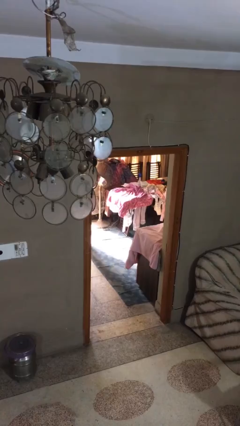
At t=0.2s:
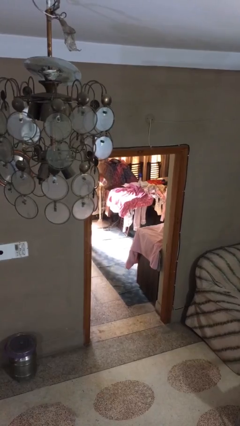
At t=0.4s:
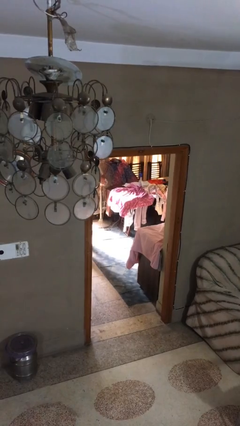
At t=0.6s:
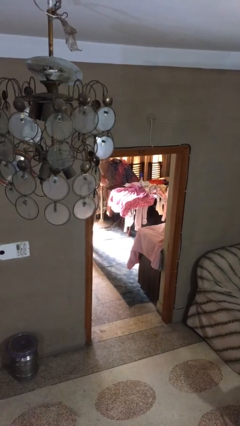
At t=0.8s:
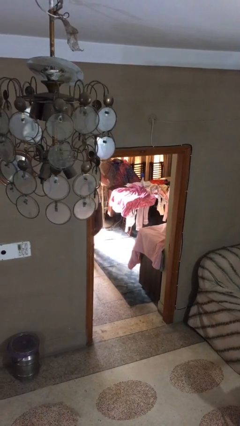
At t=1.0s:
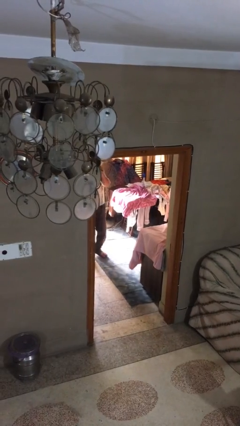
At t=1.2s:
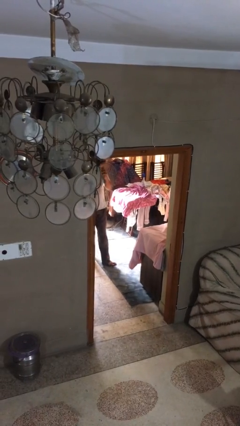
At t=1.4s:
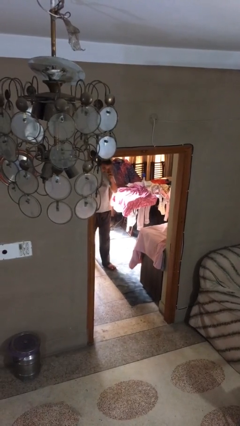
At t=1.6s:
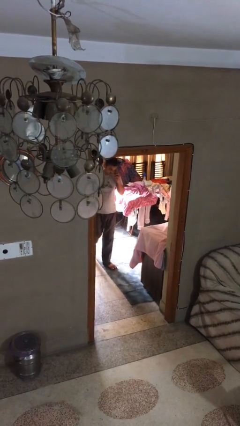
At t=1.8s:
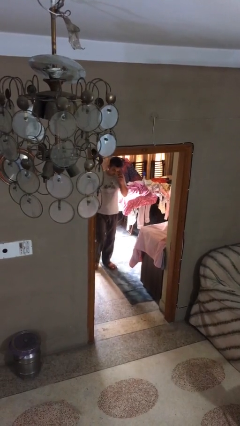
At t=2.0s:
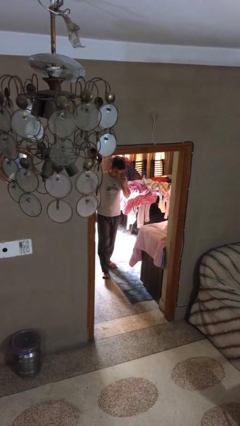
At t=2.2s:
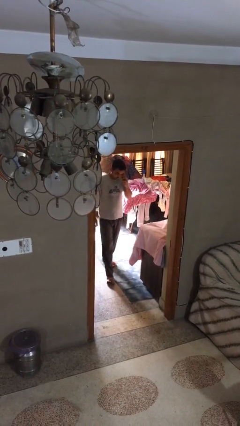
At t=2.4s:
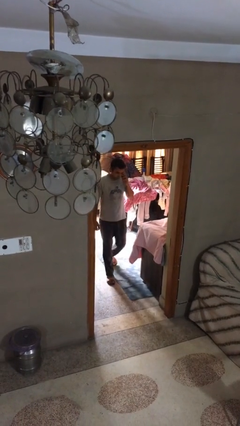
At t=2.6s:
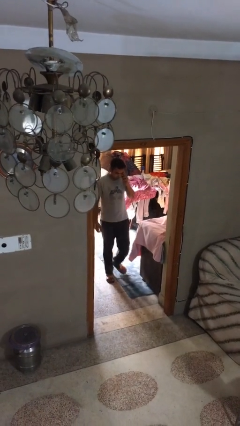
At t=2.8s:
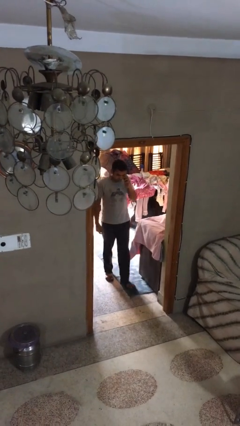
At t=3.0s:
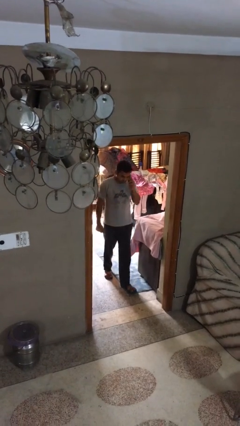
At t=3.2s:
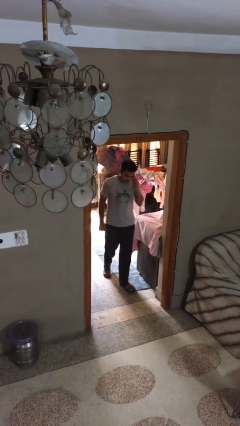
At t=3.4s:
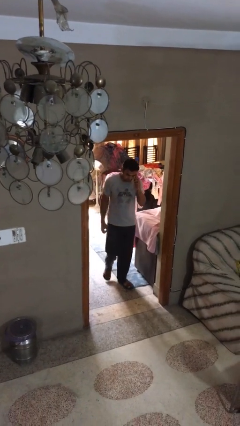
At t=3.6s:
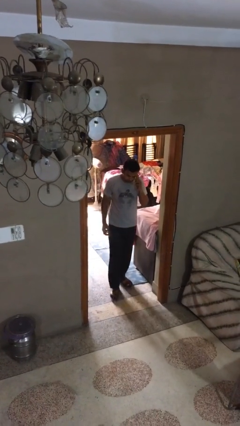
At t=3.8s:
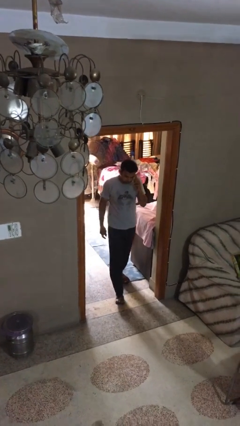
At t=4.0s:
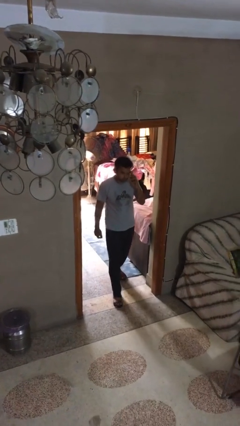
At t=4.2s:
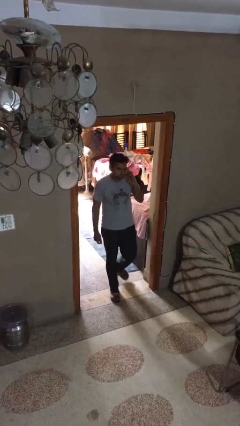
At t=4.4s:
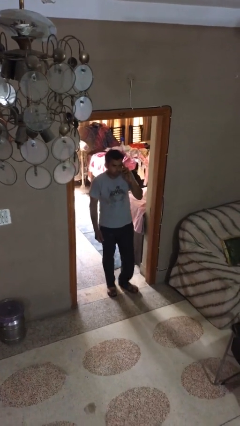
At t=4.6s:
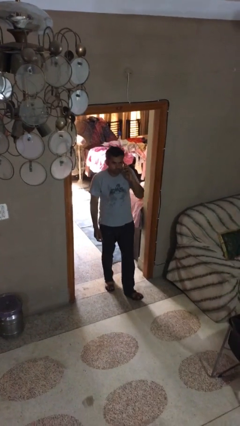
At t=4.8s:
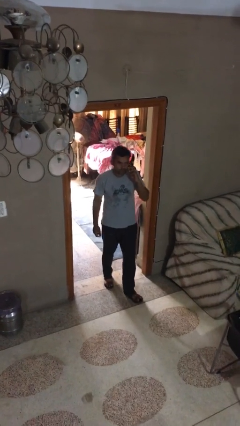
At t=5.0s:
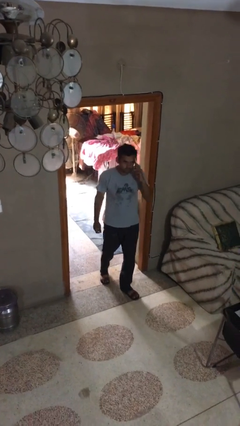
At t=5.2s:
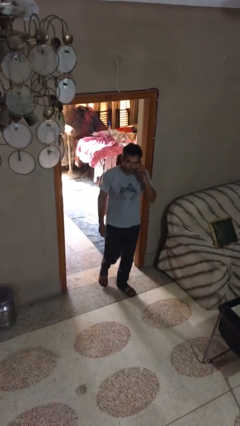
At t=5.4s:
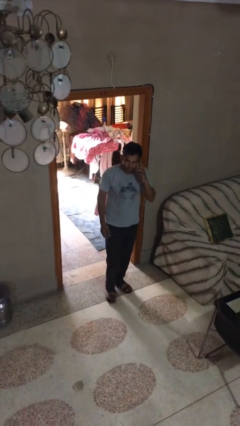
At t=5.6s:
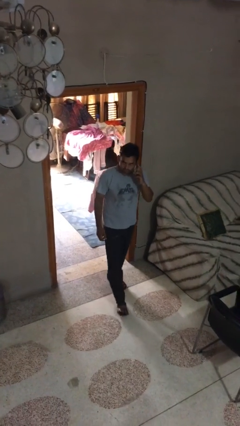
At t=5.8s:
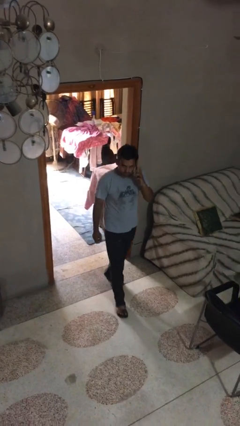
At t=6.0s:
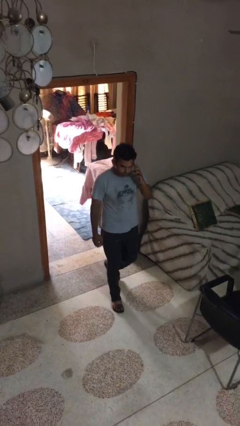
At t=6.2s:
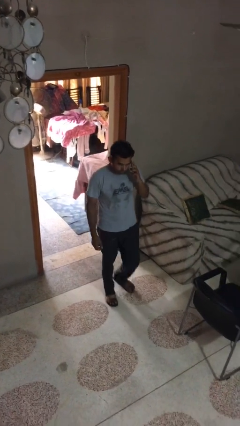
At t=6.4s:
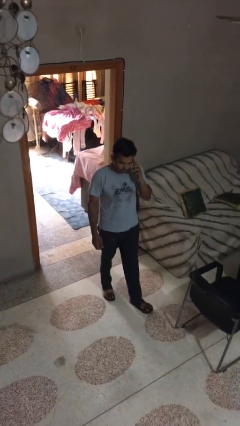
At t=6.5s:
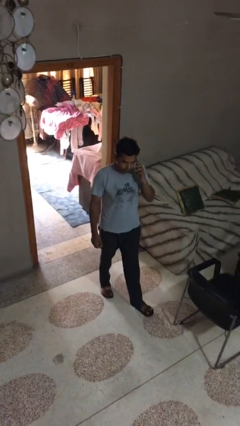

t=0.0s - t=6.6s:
person enters scene through structure

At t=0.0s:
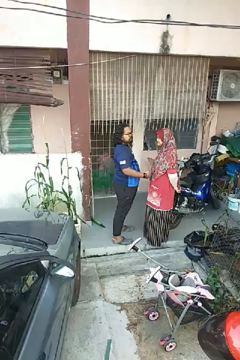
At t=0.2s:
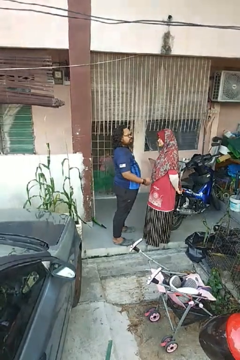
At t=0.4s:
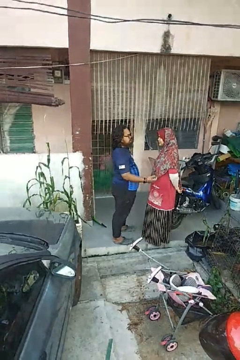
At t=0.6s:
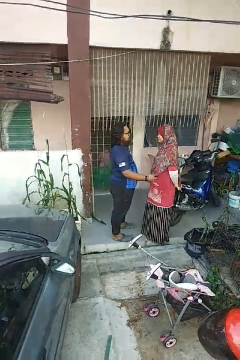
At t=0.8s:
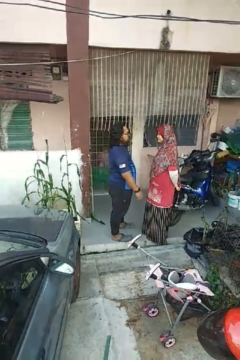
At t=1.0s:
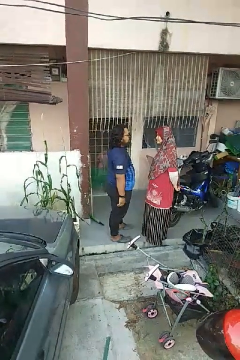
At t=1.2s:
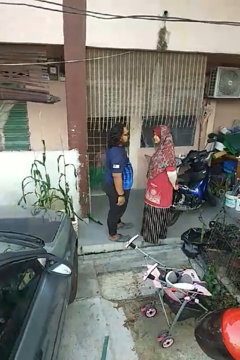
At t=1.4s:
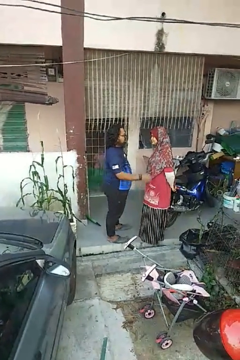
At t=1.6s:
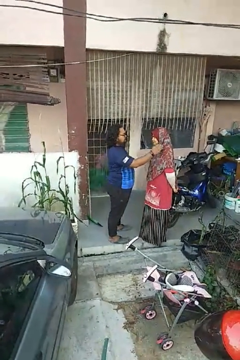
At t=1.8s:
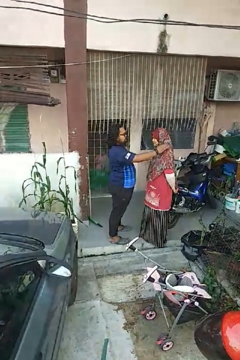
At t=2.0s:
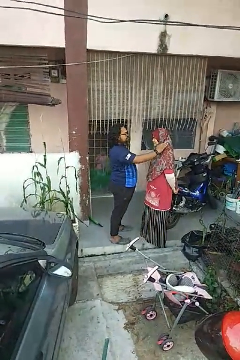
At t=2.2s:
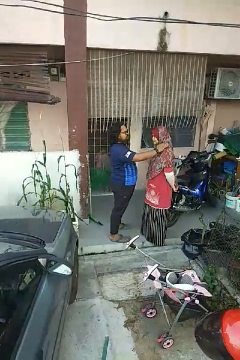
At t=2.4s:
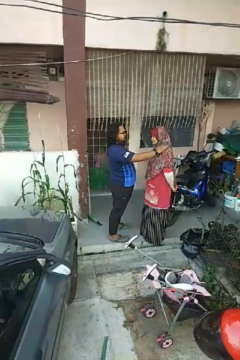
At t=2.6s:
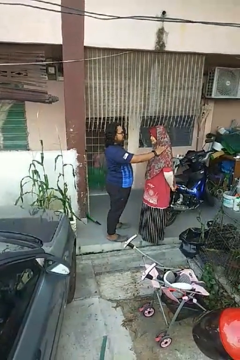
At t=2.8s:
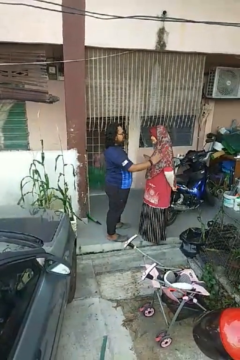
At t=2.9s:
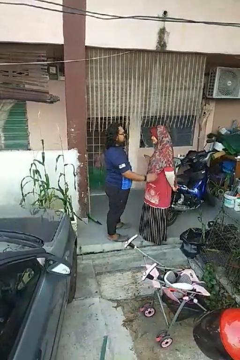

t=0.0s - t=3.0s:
person pounds shoulders of person

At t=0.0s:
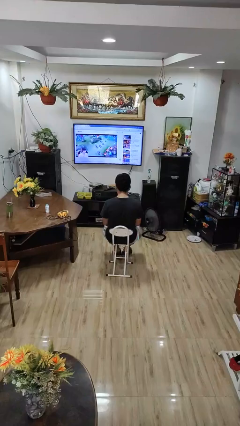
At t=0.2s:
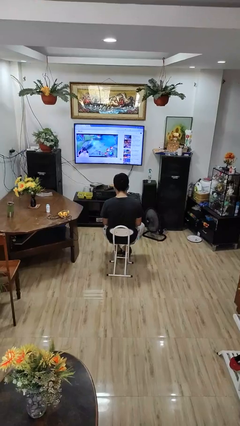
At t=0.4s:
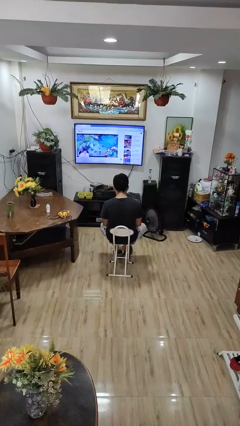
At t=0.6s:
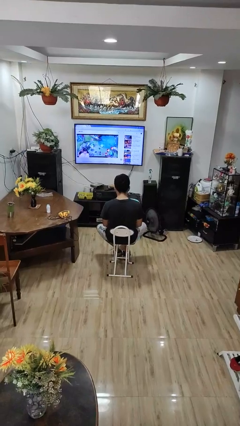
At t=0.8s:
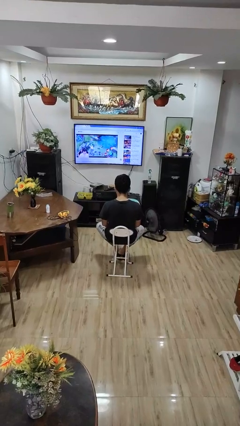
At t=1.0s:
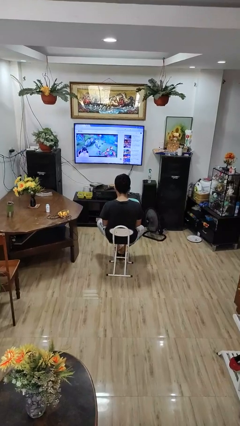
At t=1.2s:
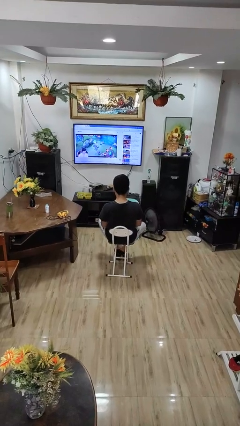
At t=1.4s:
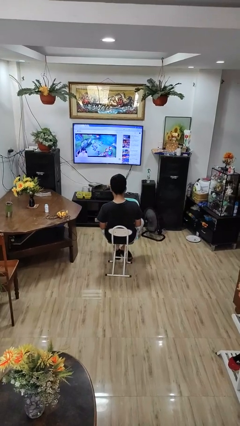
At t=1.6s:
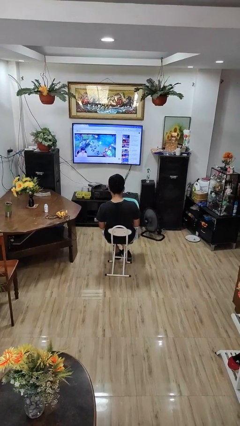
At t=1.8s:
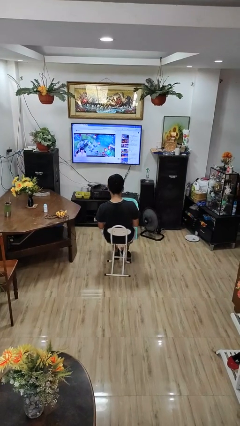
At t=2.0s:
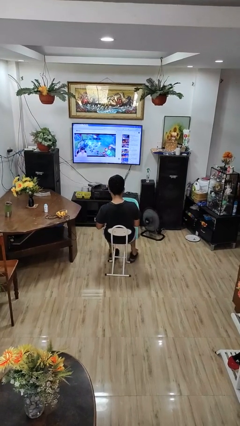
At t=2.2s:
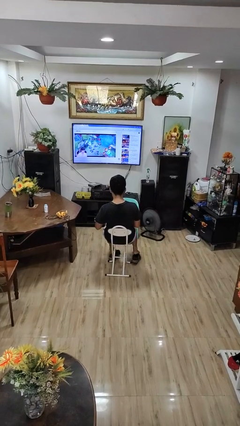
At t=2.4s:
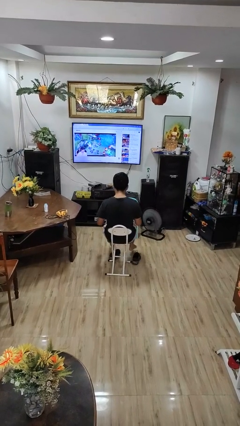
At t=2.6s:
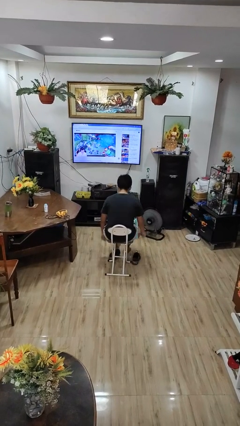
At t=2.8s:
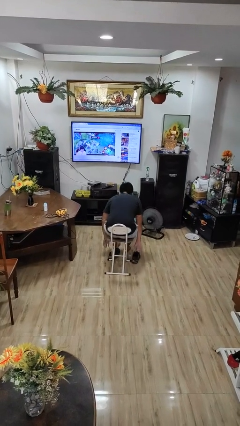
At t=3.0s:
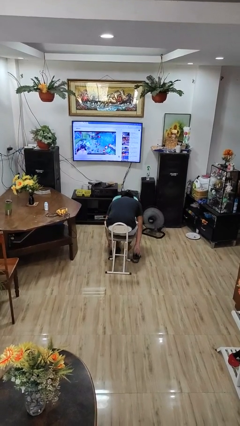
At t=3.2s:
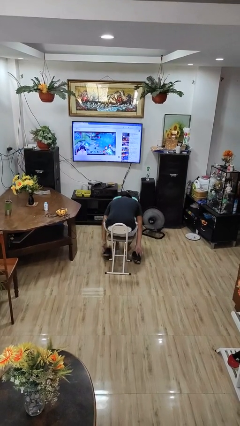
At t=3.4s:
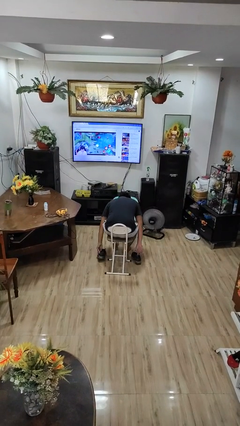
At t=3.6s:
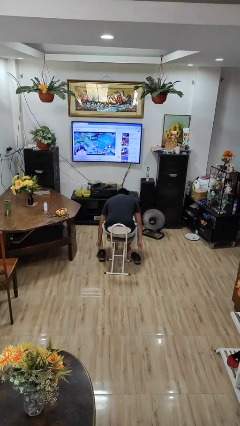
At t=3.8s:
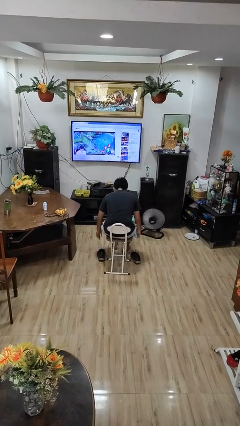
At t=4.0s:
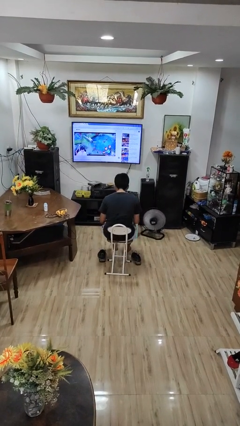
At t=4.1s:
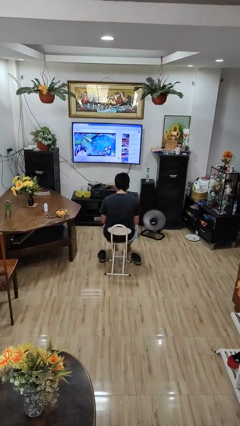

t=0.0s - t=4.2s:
person takes off shoes

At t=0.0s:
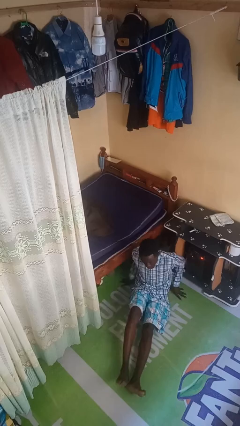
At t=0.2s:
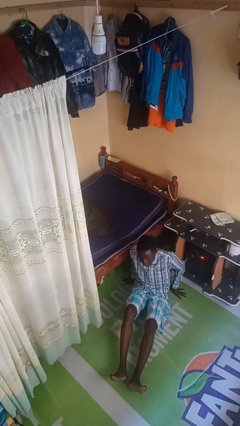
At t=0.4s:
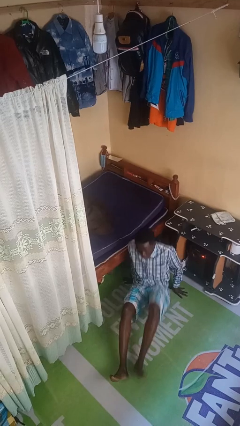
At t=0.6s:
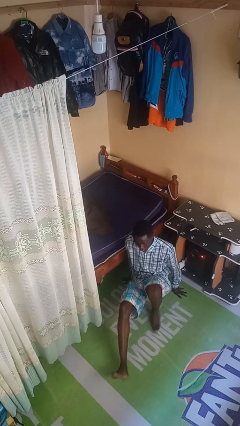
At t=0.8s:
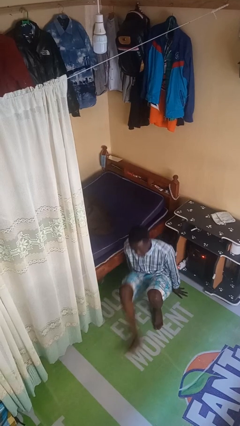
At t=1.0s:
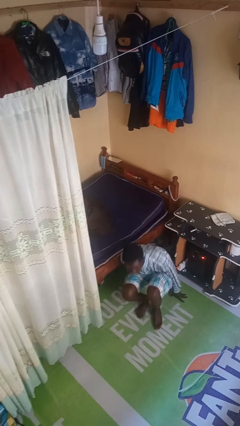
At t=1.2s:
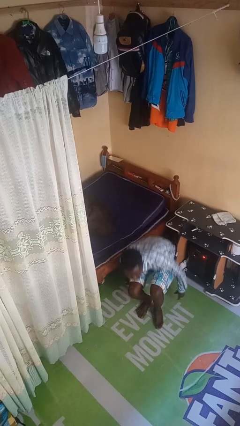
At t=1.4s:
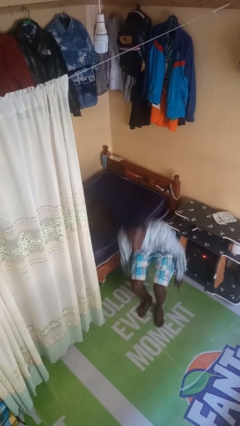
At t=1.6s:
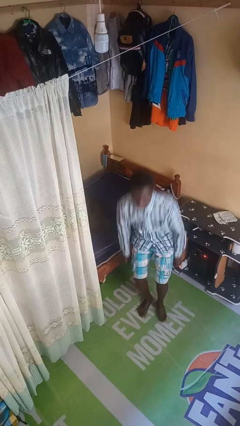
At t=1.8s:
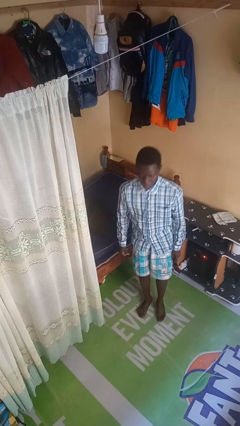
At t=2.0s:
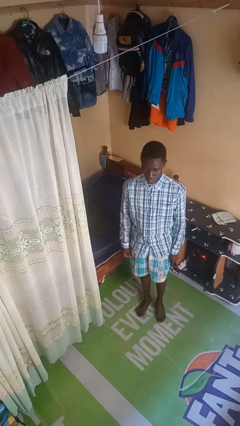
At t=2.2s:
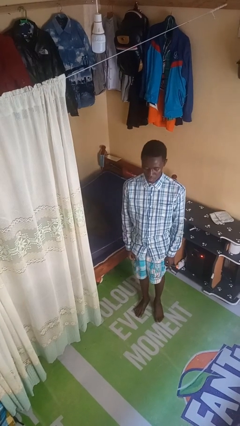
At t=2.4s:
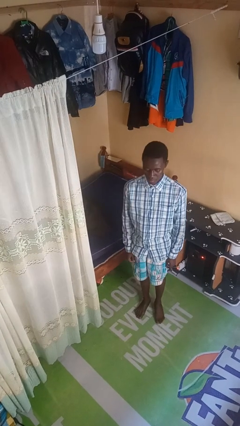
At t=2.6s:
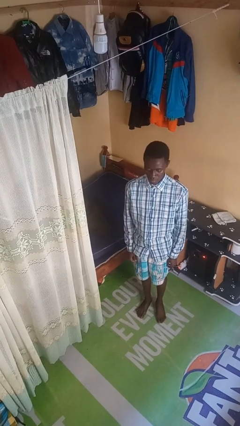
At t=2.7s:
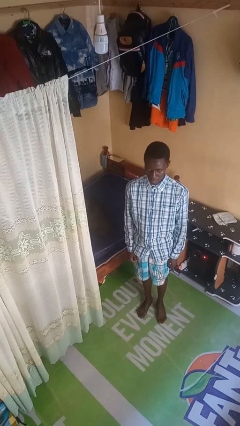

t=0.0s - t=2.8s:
person stands up from floor

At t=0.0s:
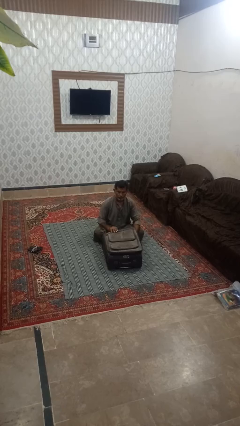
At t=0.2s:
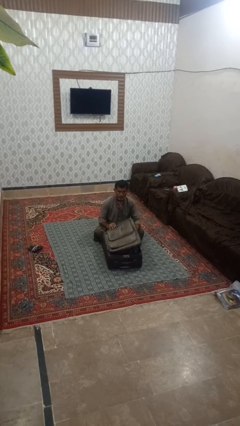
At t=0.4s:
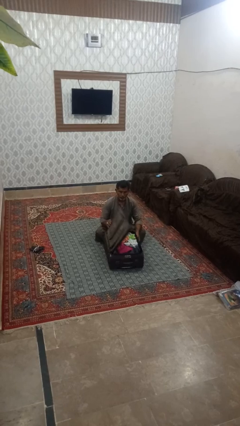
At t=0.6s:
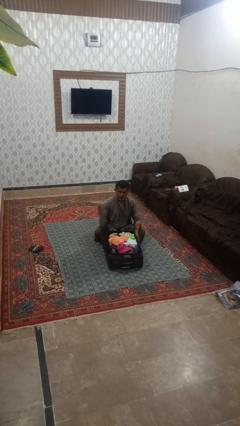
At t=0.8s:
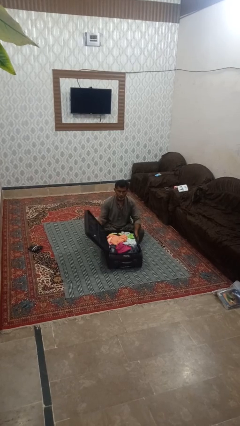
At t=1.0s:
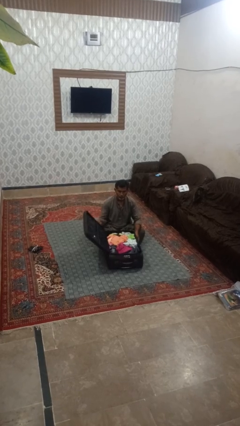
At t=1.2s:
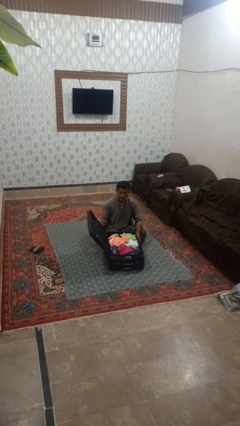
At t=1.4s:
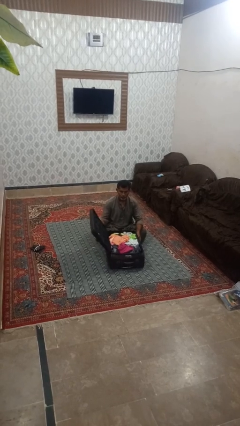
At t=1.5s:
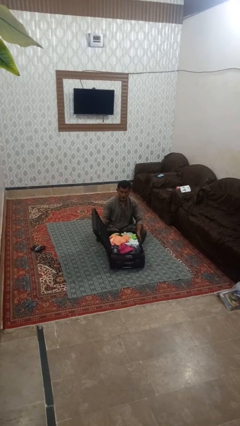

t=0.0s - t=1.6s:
person opens suitcase
